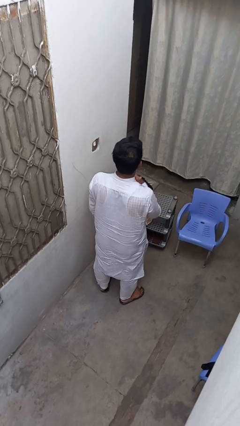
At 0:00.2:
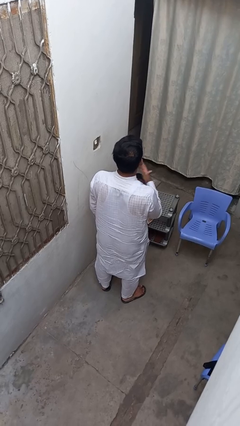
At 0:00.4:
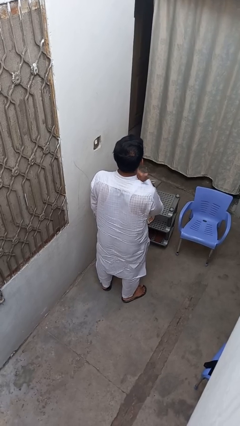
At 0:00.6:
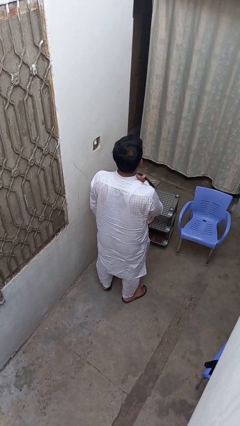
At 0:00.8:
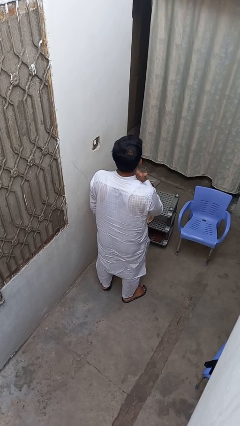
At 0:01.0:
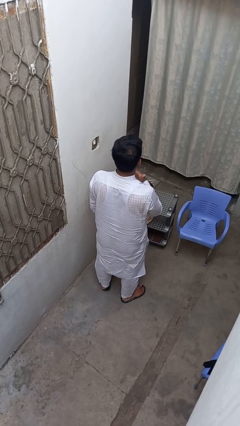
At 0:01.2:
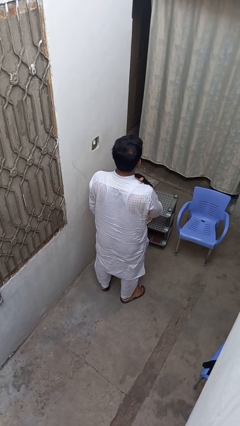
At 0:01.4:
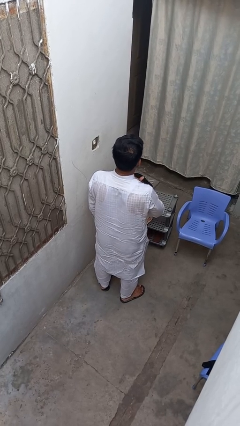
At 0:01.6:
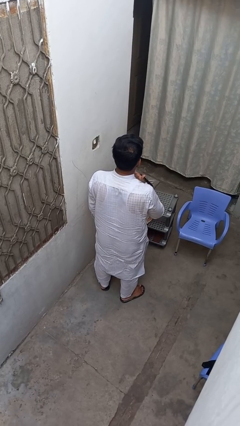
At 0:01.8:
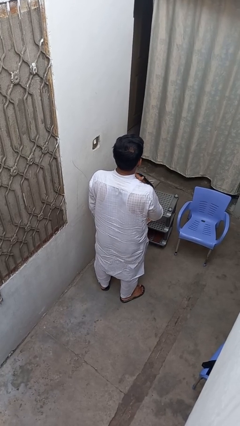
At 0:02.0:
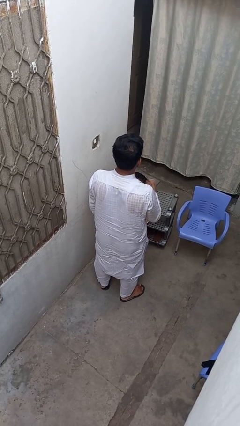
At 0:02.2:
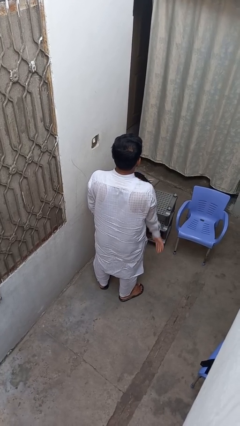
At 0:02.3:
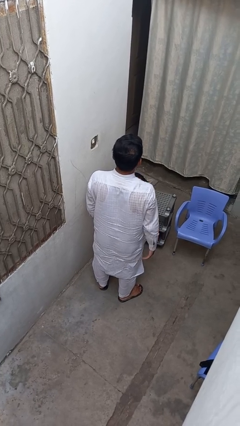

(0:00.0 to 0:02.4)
person drums on chest

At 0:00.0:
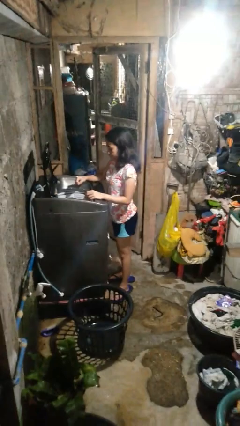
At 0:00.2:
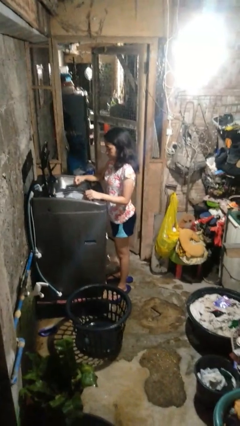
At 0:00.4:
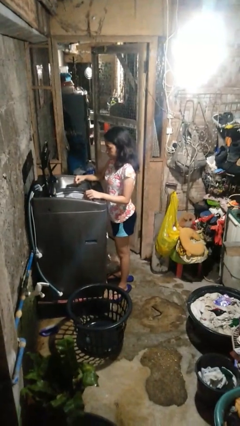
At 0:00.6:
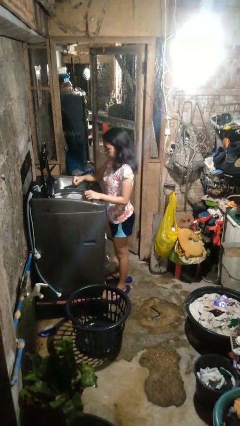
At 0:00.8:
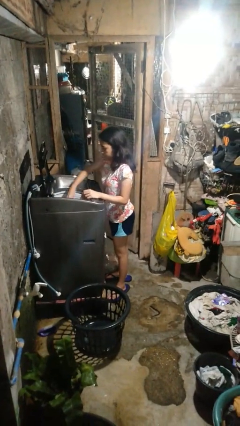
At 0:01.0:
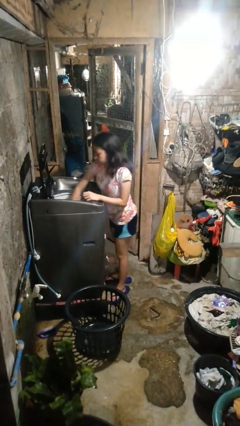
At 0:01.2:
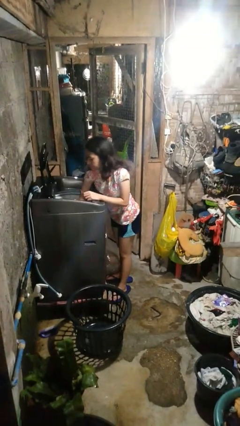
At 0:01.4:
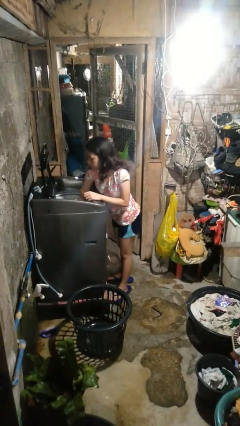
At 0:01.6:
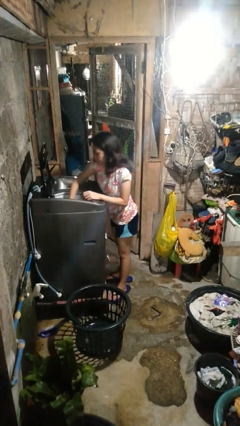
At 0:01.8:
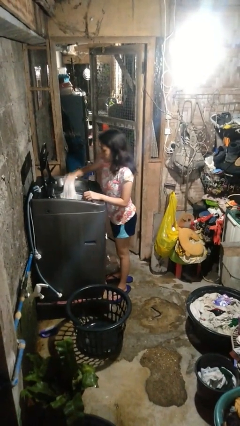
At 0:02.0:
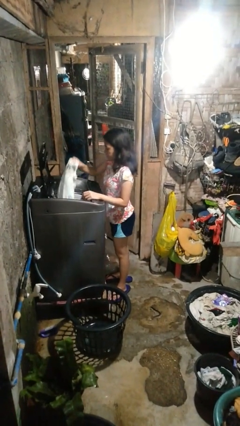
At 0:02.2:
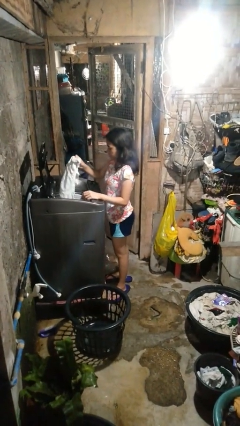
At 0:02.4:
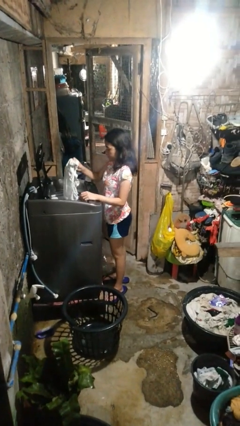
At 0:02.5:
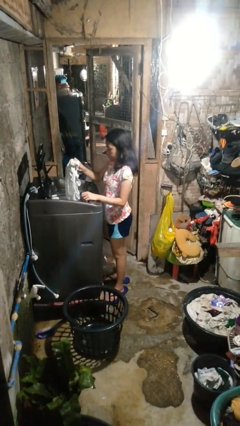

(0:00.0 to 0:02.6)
person unloads clotheswasher

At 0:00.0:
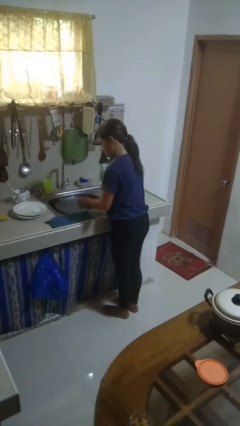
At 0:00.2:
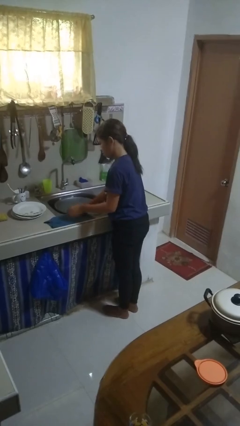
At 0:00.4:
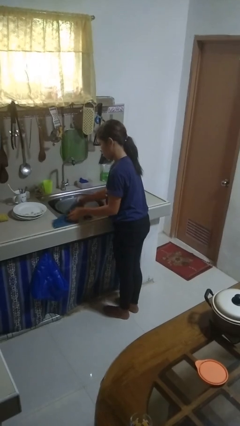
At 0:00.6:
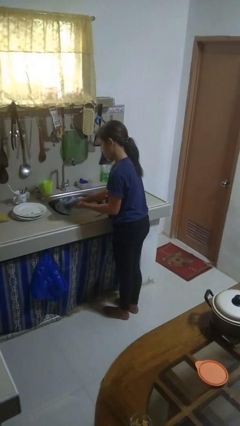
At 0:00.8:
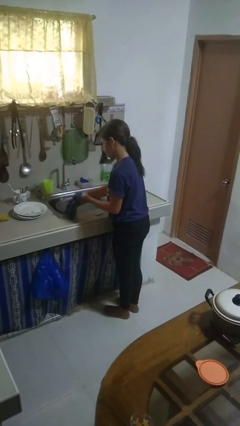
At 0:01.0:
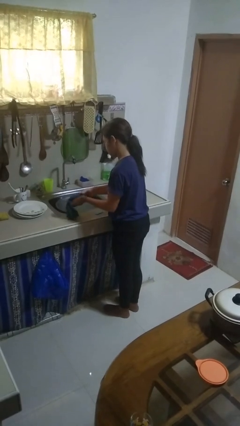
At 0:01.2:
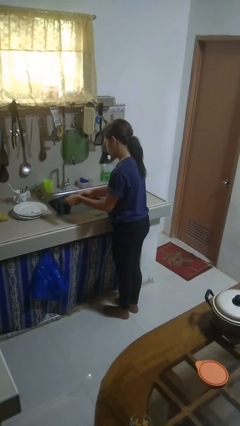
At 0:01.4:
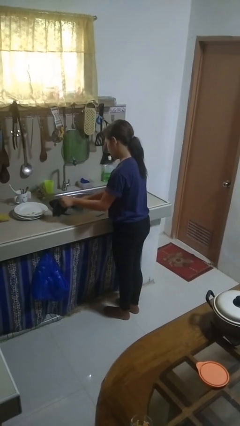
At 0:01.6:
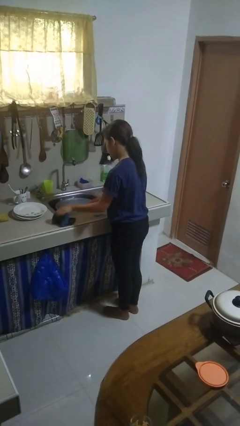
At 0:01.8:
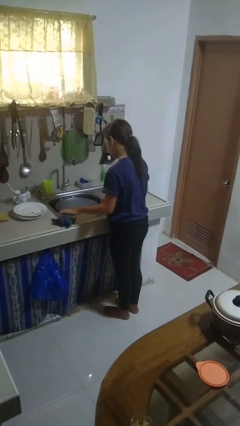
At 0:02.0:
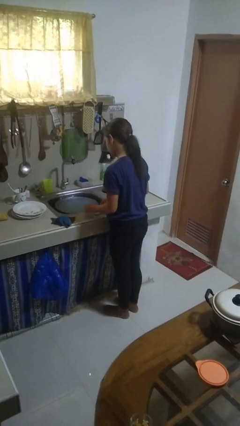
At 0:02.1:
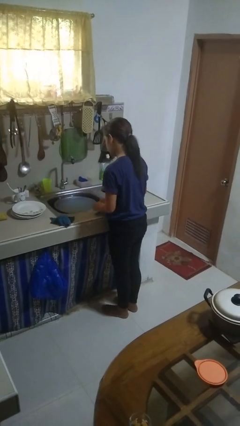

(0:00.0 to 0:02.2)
person dries hands with towel

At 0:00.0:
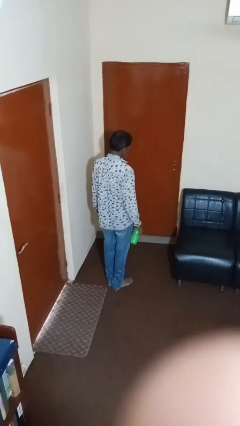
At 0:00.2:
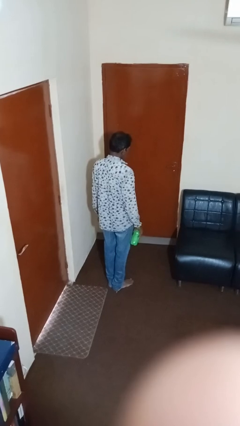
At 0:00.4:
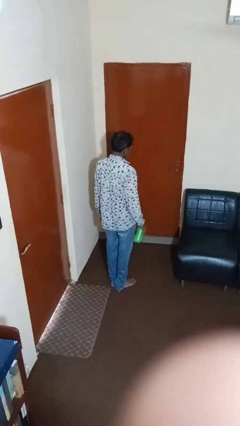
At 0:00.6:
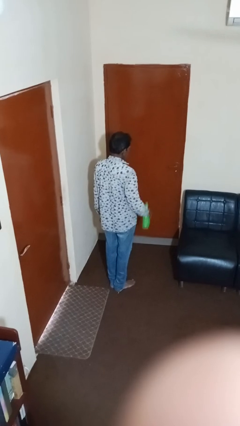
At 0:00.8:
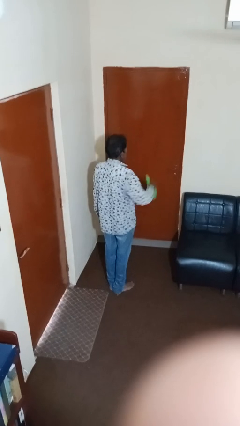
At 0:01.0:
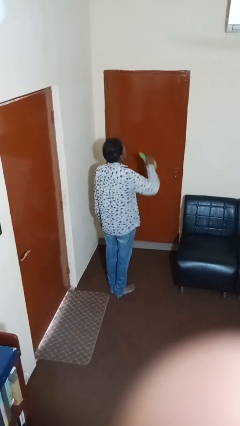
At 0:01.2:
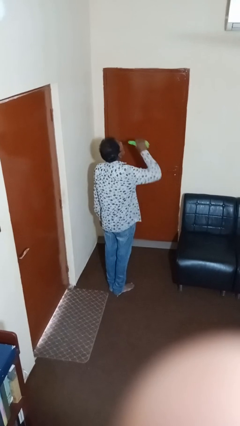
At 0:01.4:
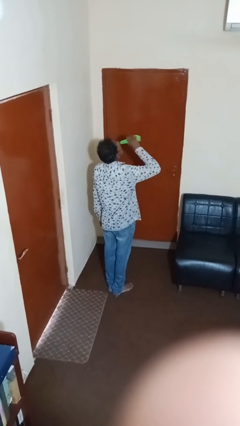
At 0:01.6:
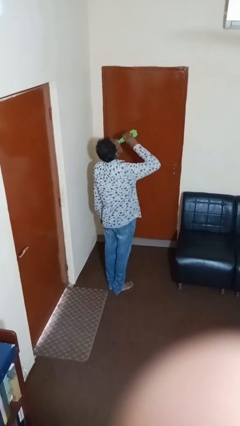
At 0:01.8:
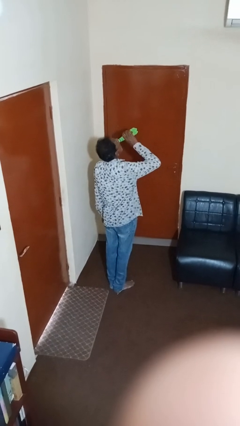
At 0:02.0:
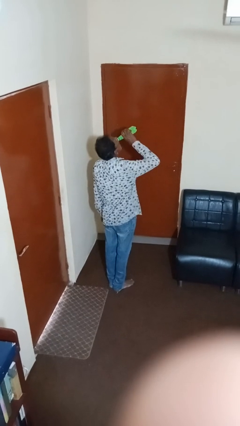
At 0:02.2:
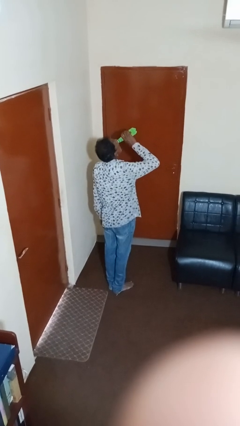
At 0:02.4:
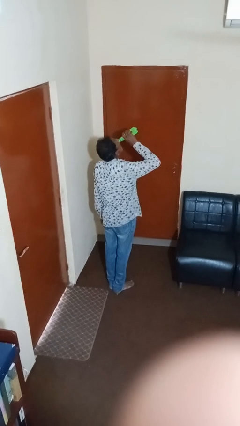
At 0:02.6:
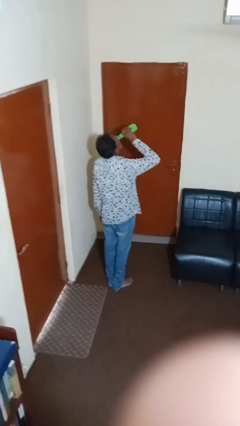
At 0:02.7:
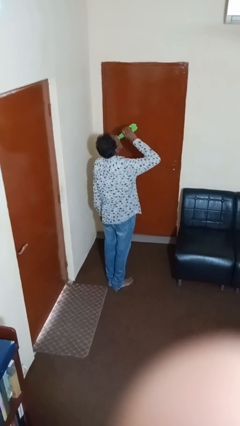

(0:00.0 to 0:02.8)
person drinks from bottle

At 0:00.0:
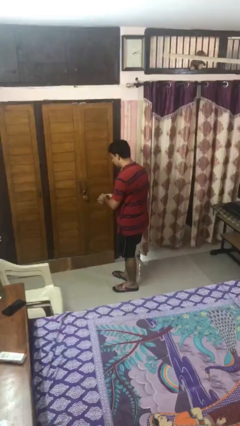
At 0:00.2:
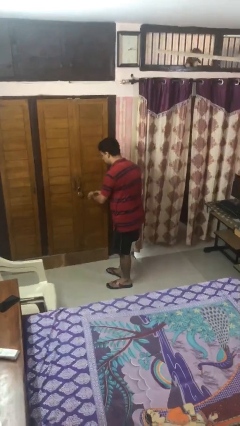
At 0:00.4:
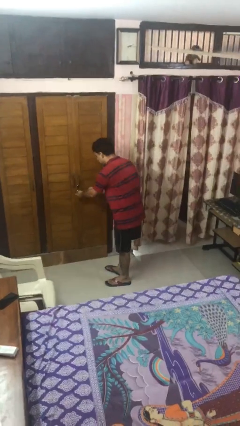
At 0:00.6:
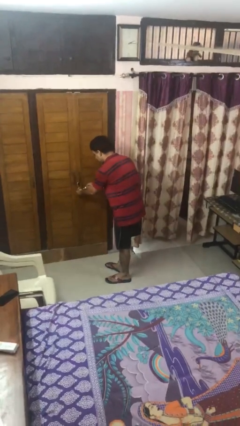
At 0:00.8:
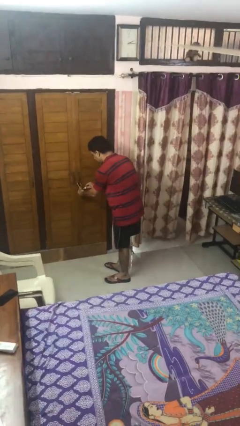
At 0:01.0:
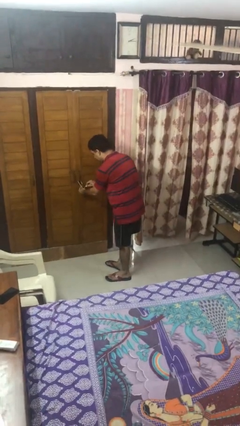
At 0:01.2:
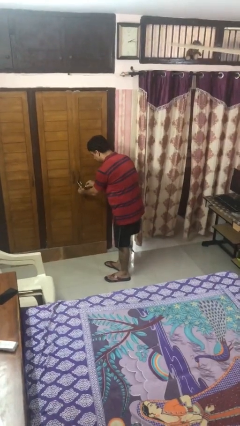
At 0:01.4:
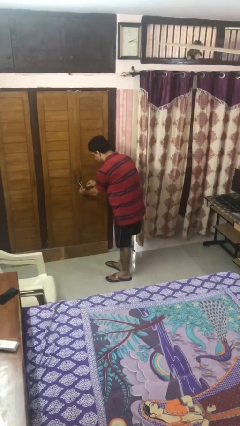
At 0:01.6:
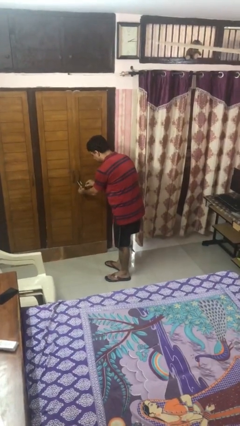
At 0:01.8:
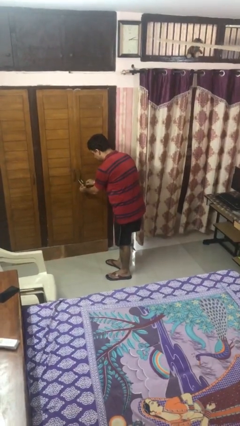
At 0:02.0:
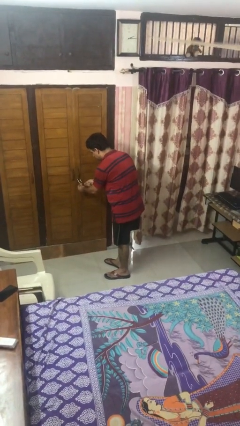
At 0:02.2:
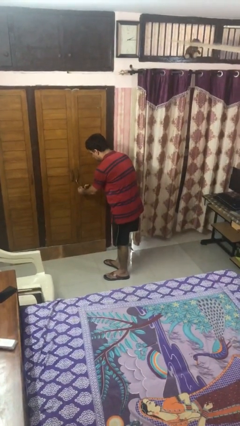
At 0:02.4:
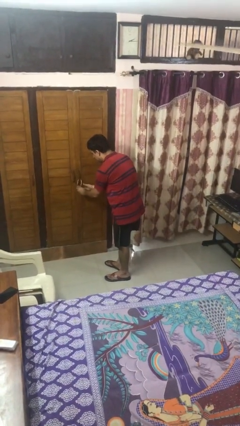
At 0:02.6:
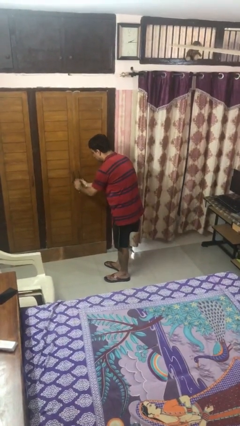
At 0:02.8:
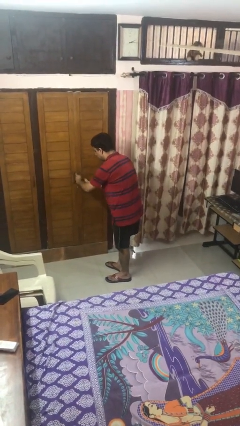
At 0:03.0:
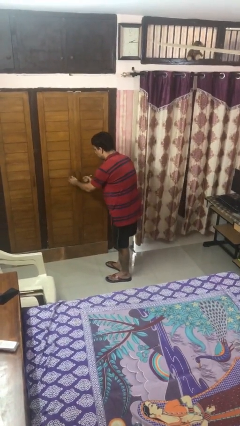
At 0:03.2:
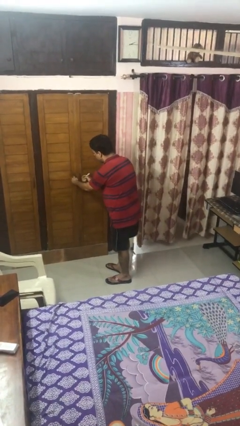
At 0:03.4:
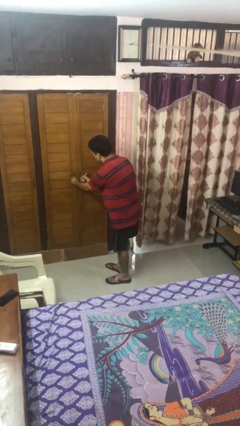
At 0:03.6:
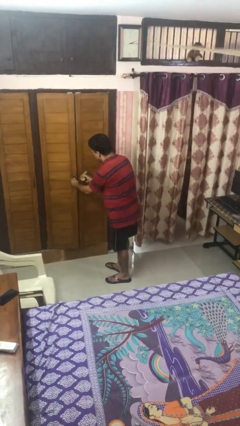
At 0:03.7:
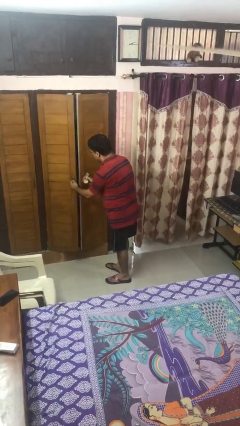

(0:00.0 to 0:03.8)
person unlocks door with keys

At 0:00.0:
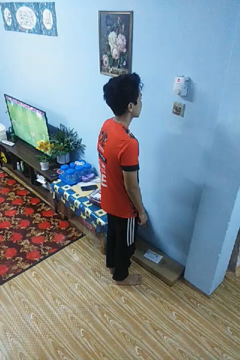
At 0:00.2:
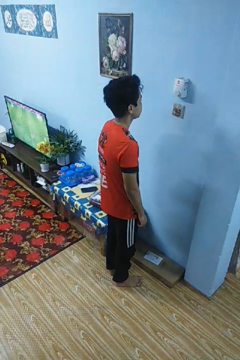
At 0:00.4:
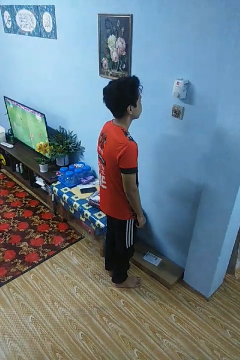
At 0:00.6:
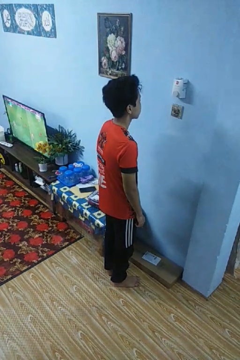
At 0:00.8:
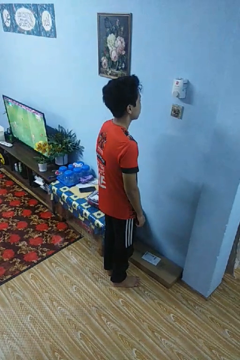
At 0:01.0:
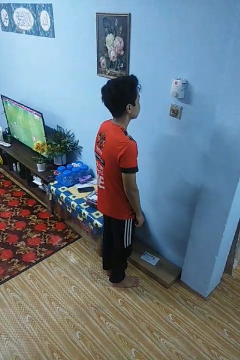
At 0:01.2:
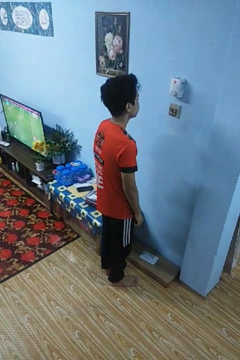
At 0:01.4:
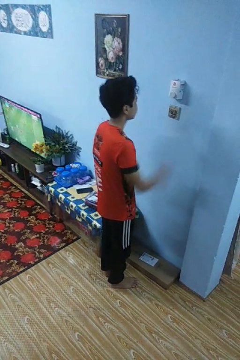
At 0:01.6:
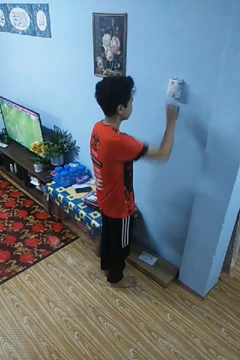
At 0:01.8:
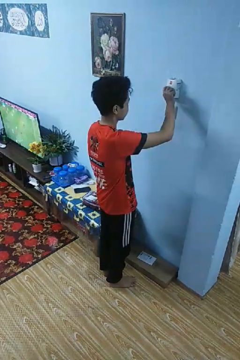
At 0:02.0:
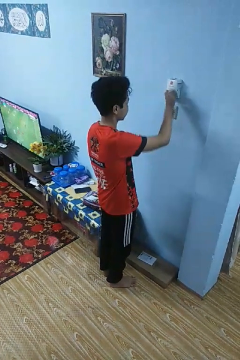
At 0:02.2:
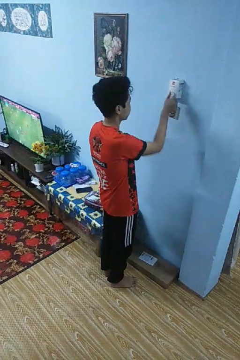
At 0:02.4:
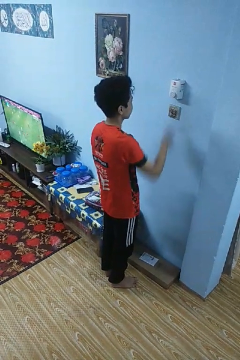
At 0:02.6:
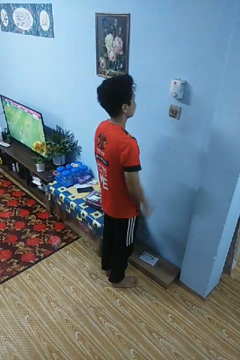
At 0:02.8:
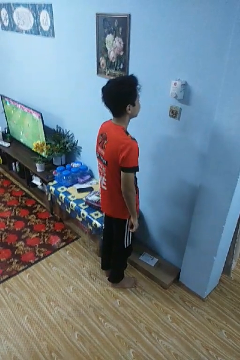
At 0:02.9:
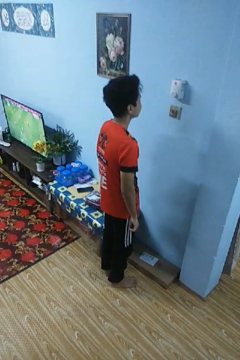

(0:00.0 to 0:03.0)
person adjusts thermostat

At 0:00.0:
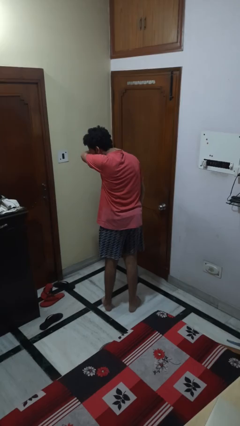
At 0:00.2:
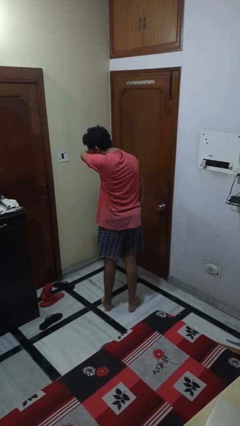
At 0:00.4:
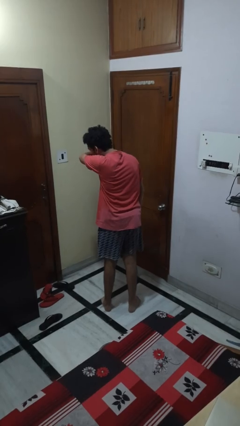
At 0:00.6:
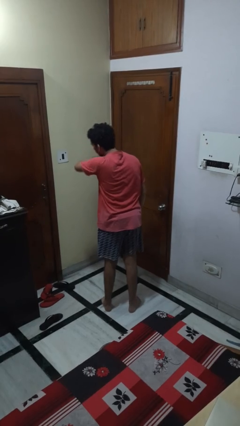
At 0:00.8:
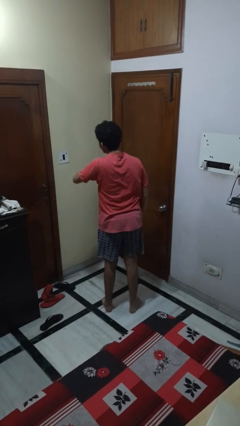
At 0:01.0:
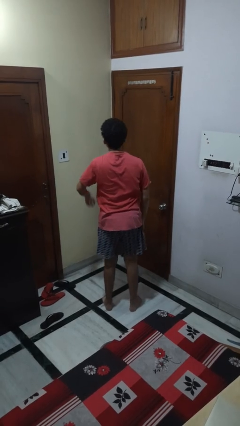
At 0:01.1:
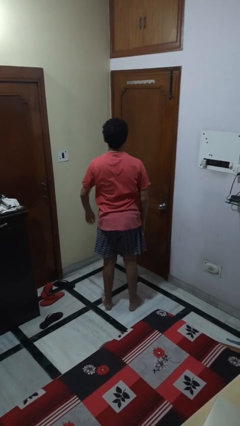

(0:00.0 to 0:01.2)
person sneezes into arm
